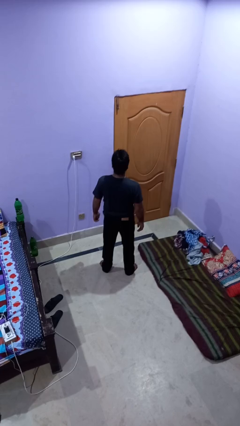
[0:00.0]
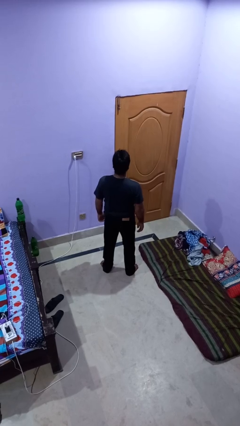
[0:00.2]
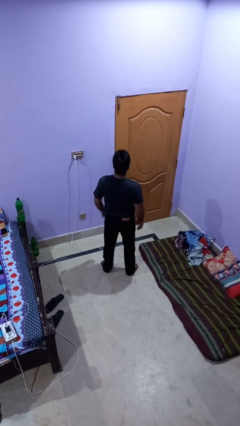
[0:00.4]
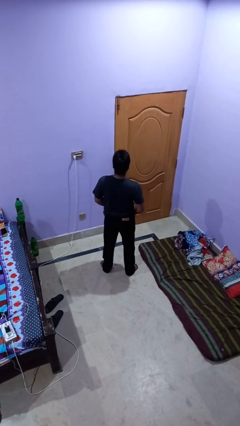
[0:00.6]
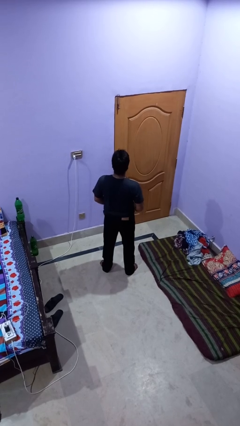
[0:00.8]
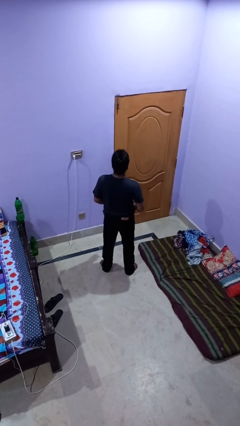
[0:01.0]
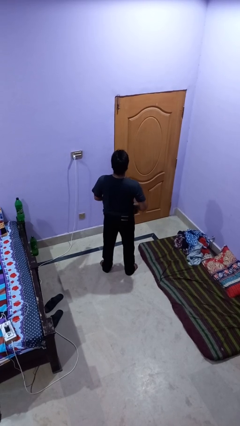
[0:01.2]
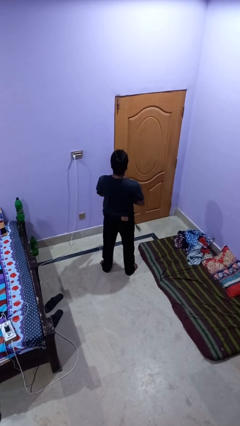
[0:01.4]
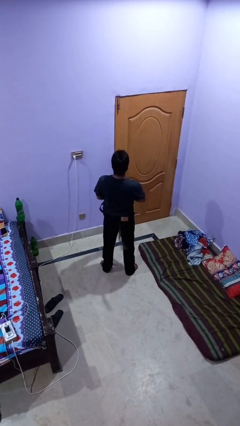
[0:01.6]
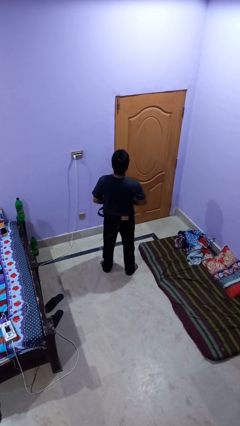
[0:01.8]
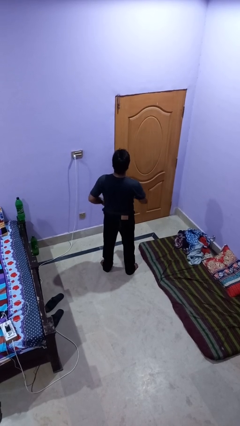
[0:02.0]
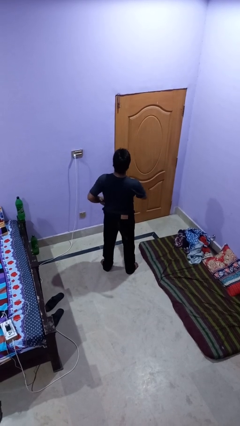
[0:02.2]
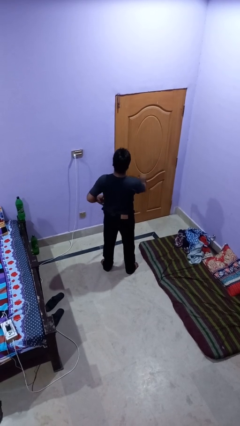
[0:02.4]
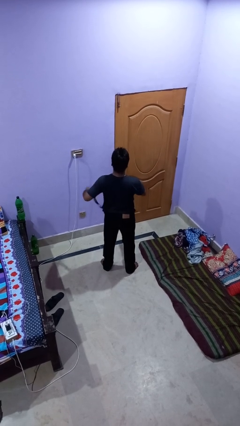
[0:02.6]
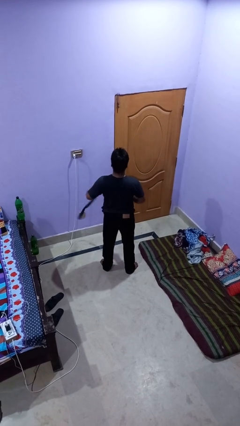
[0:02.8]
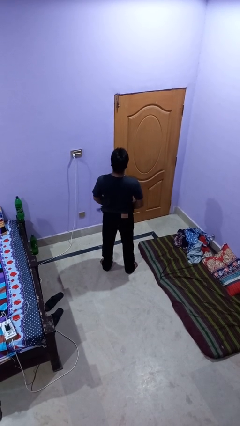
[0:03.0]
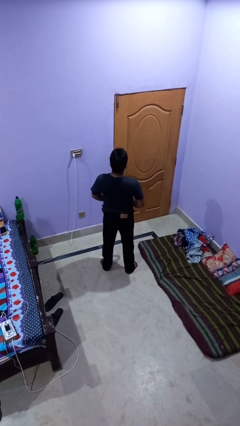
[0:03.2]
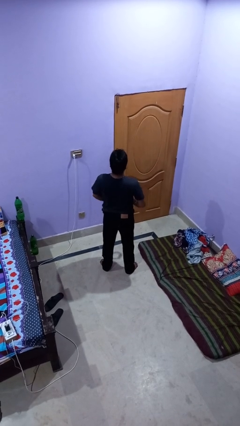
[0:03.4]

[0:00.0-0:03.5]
person takes off belt

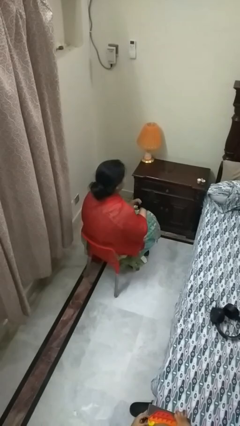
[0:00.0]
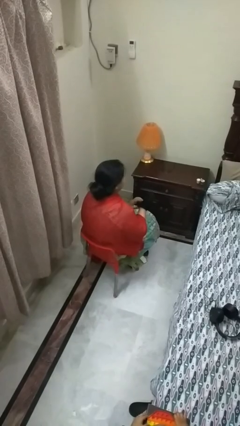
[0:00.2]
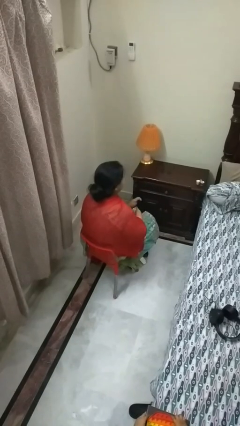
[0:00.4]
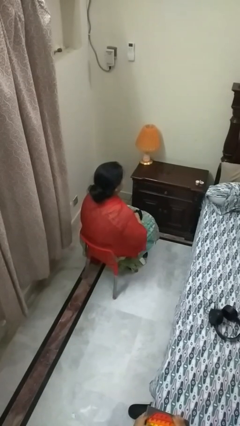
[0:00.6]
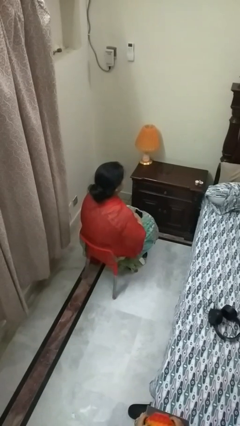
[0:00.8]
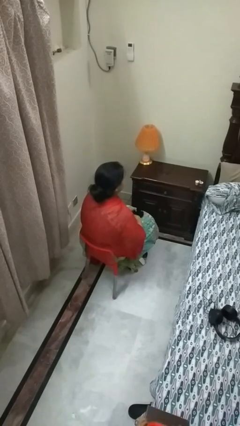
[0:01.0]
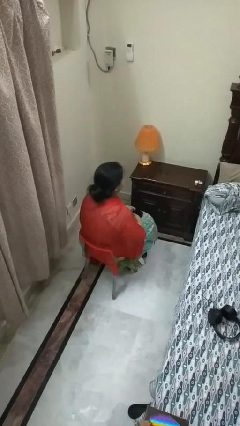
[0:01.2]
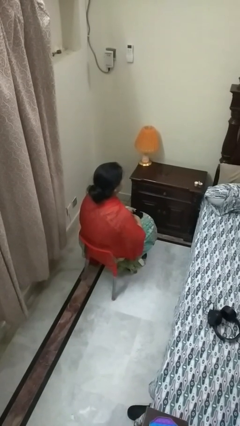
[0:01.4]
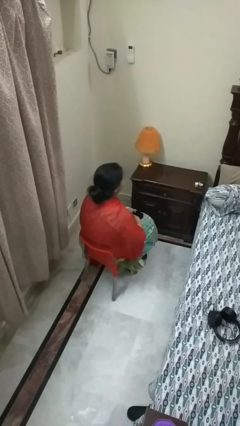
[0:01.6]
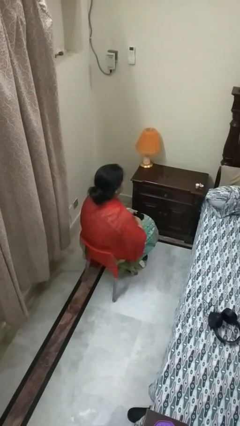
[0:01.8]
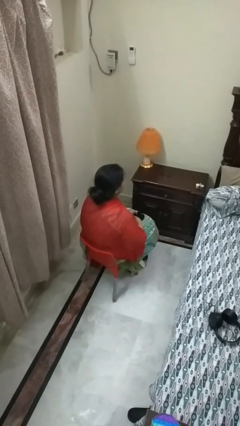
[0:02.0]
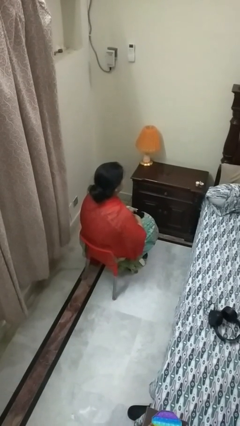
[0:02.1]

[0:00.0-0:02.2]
person takes off gloves

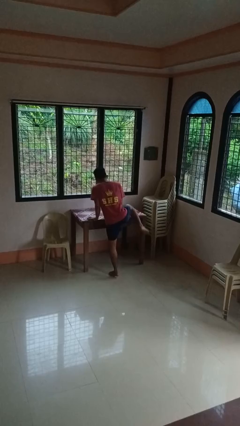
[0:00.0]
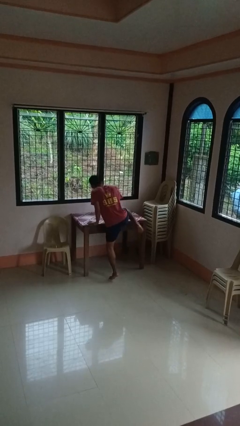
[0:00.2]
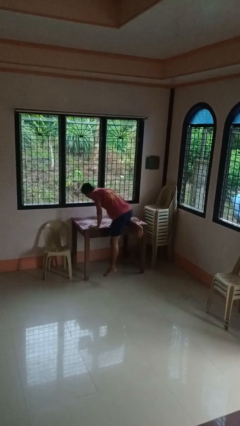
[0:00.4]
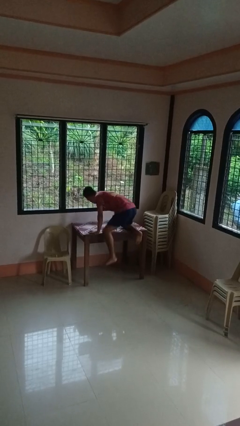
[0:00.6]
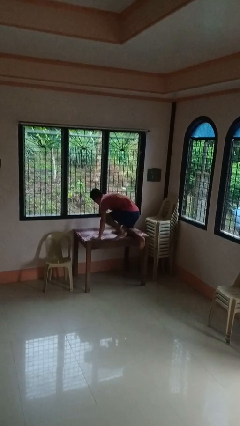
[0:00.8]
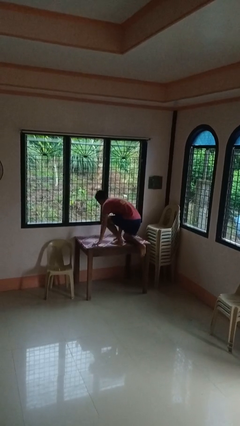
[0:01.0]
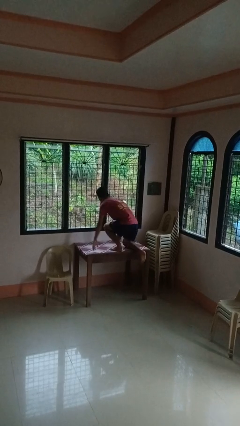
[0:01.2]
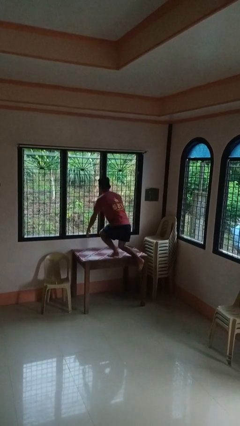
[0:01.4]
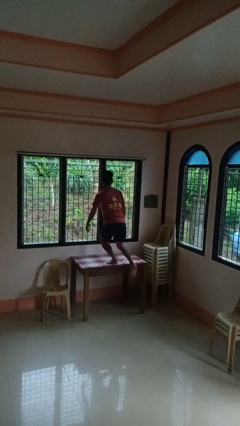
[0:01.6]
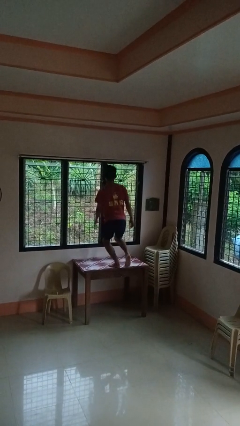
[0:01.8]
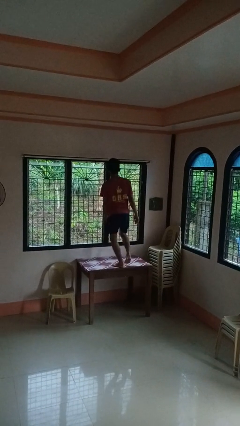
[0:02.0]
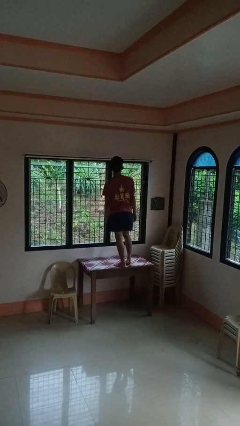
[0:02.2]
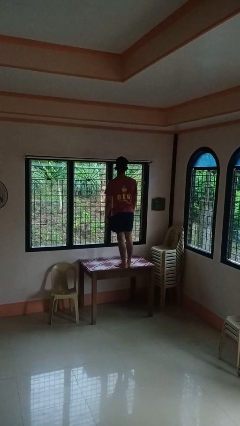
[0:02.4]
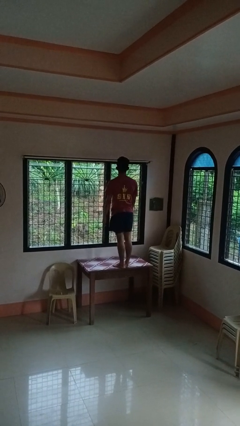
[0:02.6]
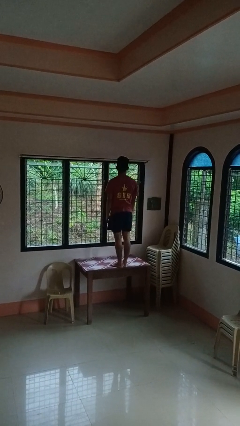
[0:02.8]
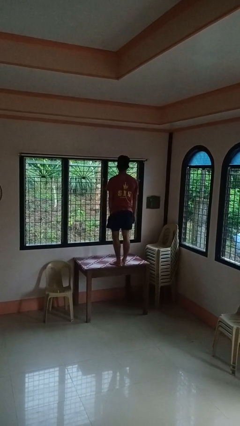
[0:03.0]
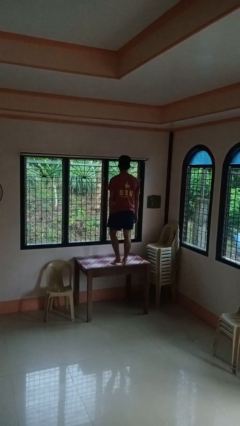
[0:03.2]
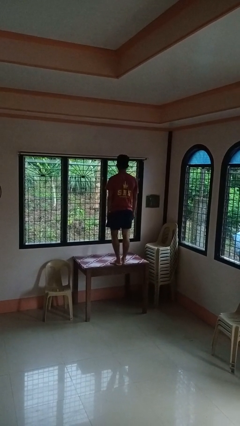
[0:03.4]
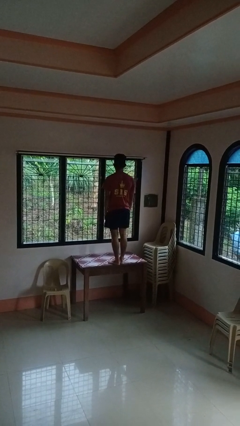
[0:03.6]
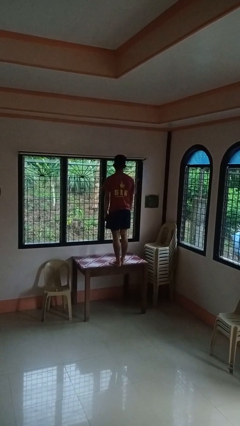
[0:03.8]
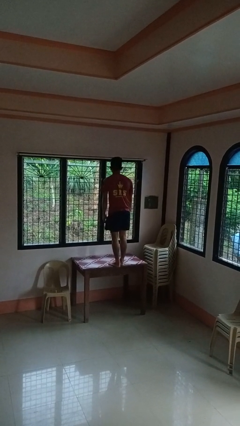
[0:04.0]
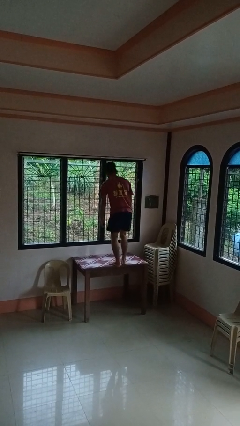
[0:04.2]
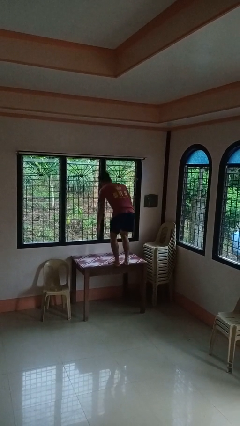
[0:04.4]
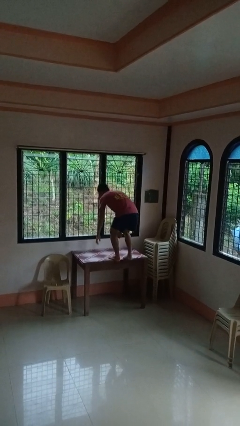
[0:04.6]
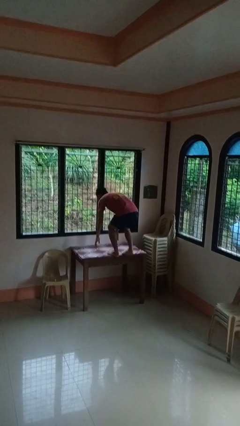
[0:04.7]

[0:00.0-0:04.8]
person climbs on table

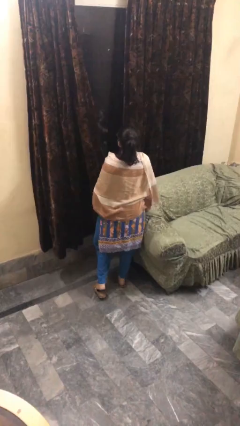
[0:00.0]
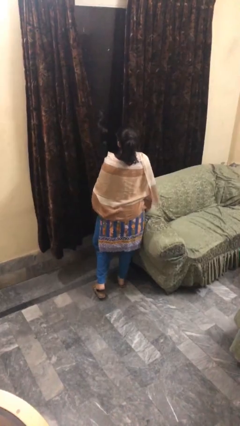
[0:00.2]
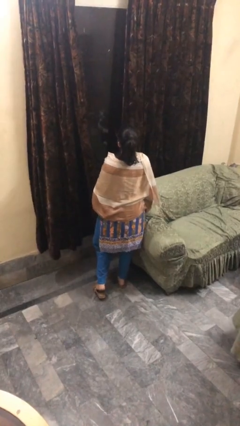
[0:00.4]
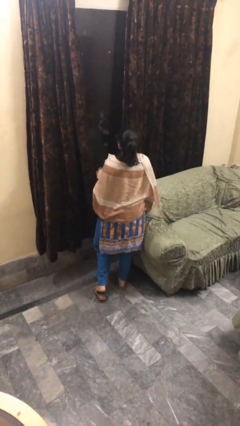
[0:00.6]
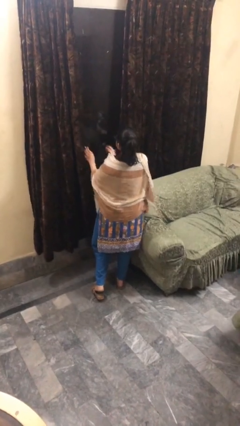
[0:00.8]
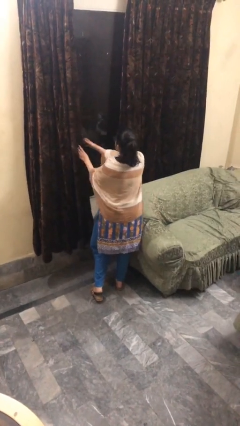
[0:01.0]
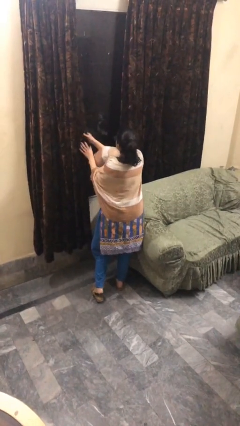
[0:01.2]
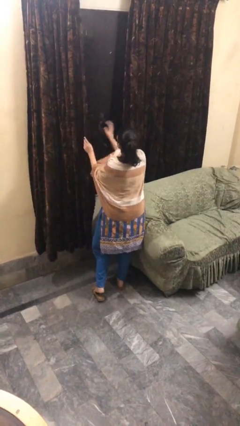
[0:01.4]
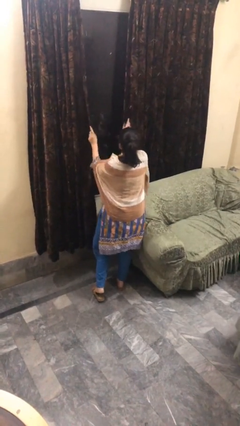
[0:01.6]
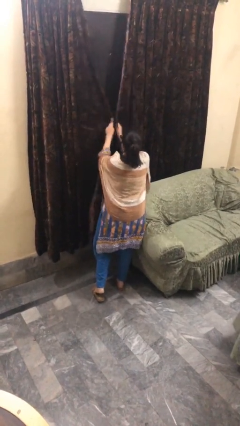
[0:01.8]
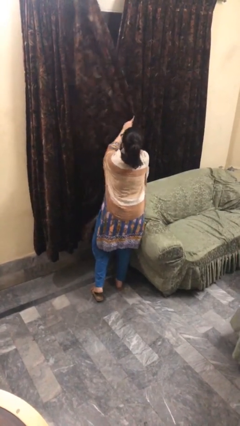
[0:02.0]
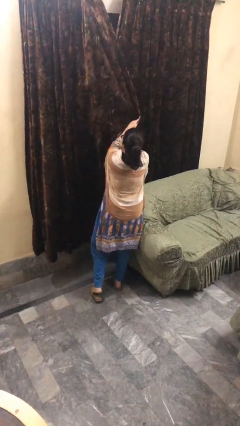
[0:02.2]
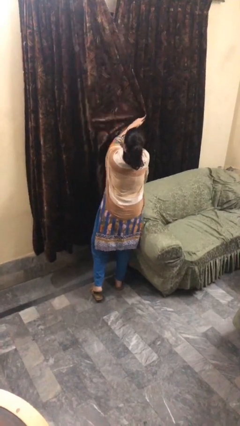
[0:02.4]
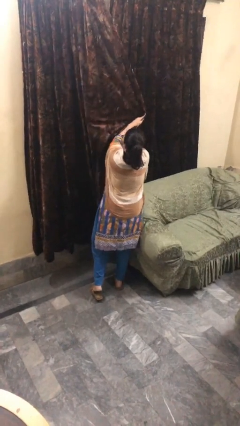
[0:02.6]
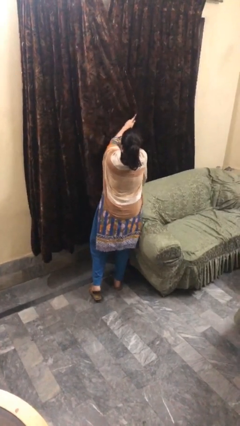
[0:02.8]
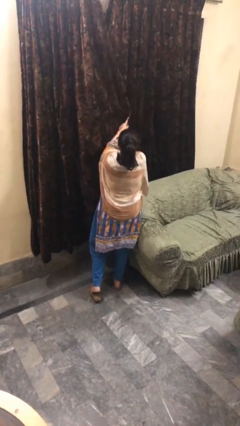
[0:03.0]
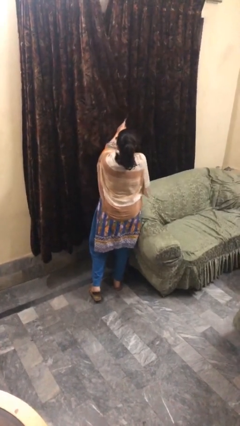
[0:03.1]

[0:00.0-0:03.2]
person closes curtains

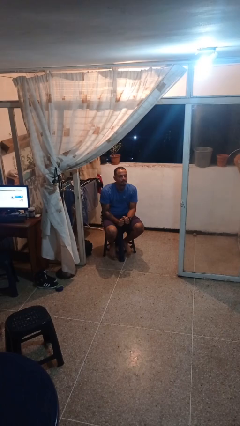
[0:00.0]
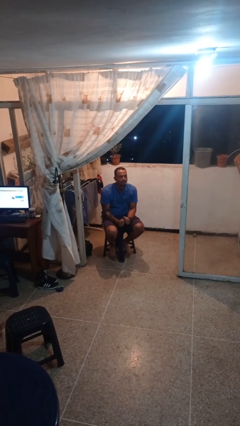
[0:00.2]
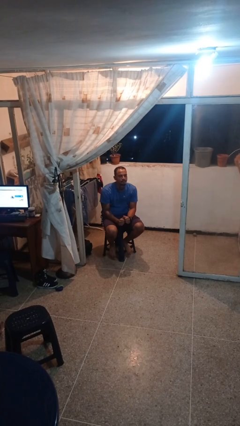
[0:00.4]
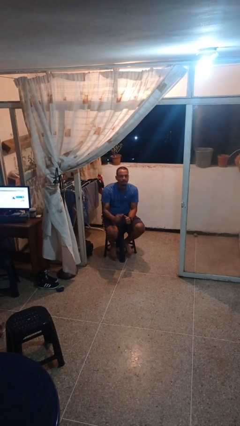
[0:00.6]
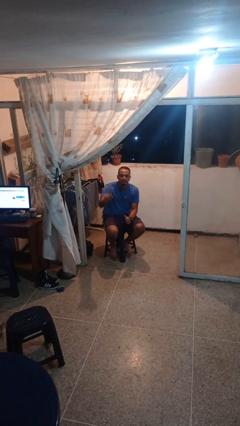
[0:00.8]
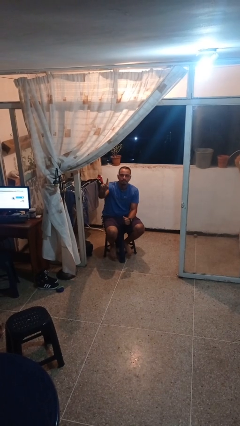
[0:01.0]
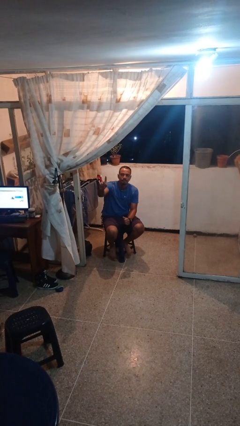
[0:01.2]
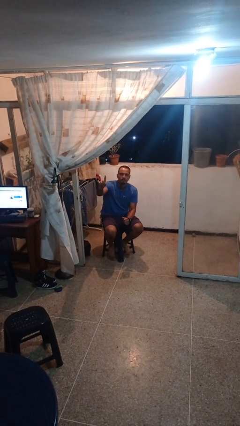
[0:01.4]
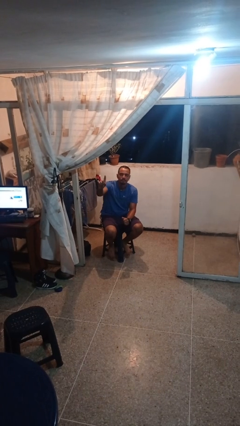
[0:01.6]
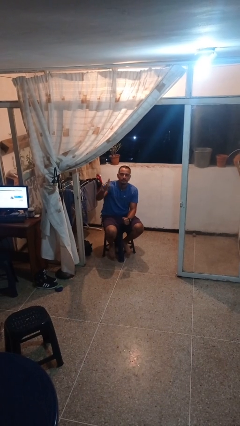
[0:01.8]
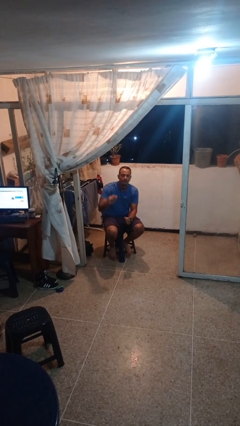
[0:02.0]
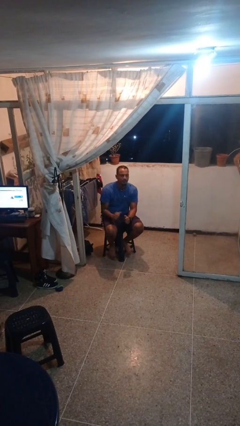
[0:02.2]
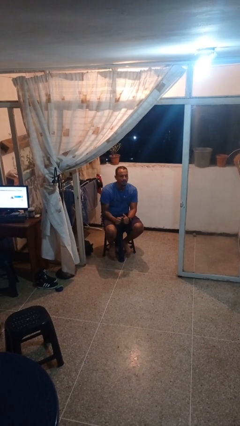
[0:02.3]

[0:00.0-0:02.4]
person gestures number one

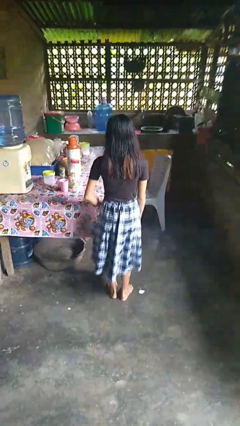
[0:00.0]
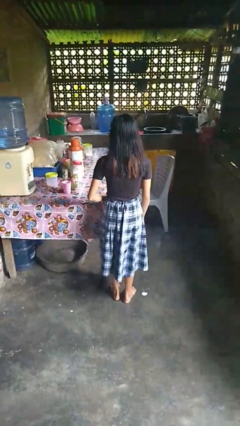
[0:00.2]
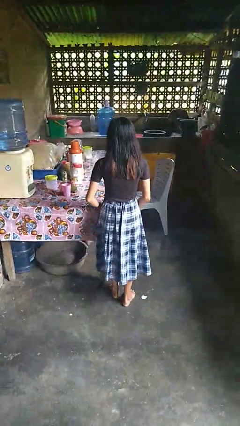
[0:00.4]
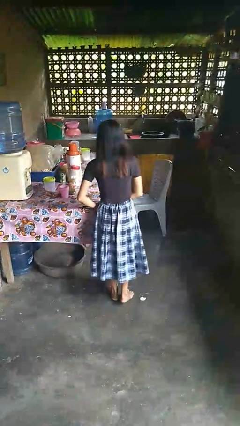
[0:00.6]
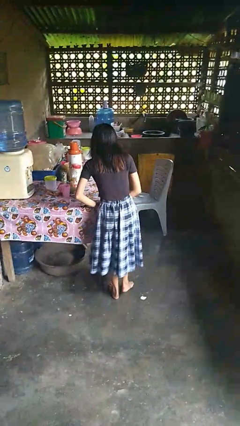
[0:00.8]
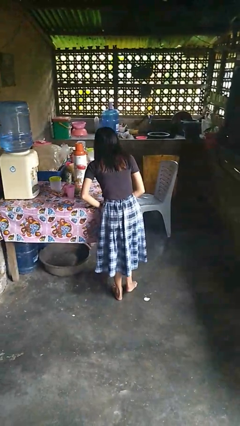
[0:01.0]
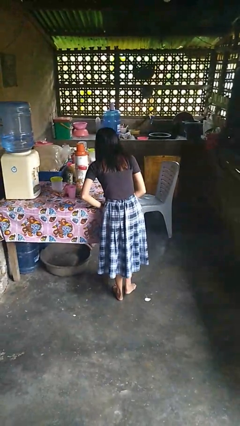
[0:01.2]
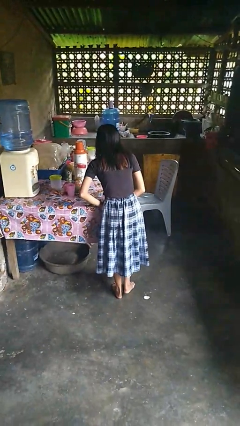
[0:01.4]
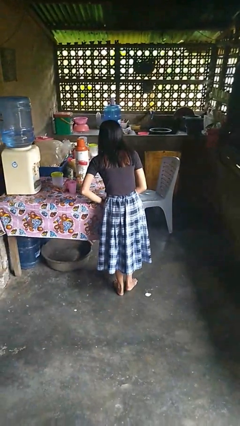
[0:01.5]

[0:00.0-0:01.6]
person bumps into table
